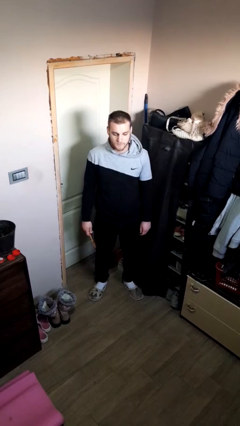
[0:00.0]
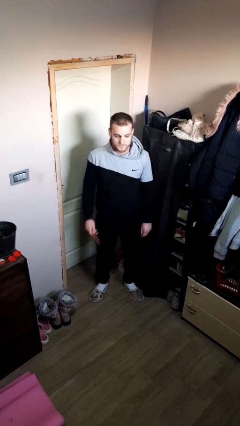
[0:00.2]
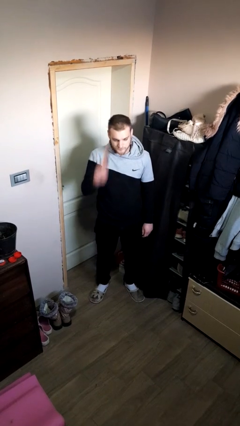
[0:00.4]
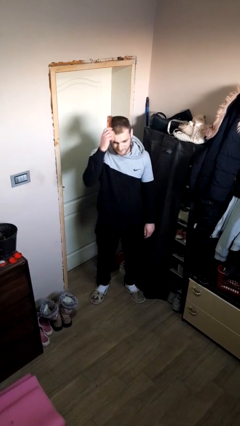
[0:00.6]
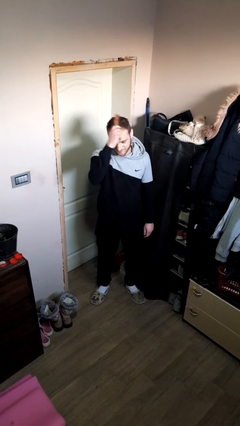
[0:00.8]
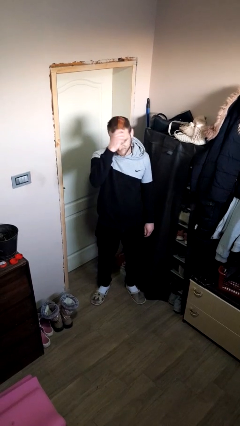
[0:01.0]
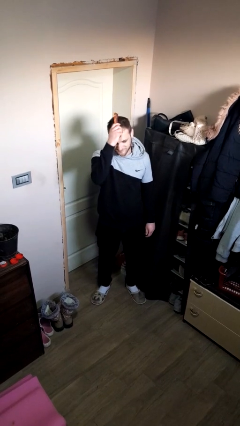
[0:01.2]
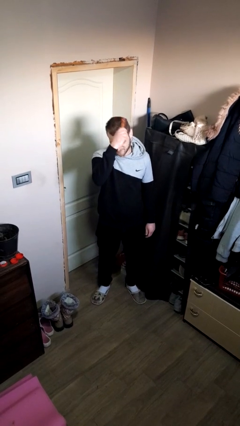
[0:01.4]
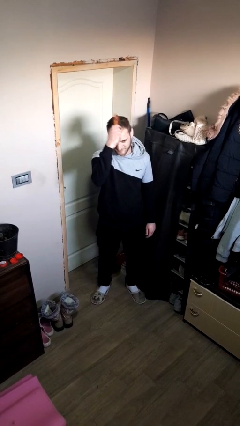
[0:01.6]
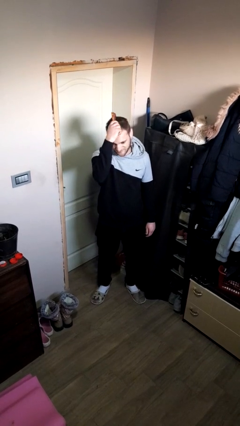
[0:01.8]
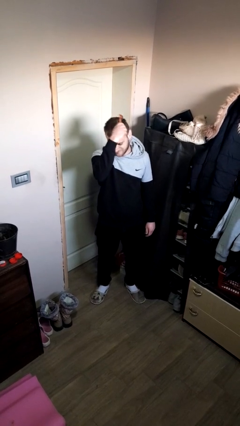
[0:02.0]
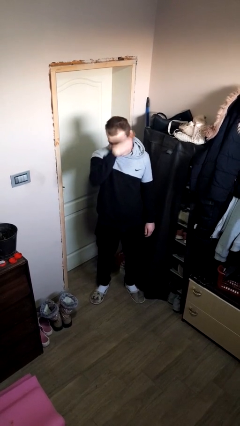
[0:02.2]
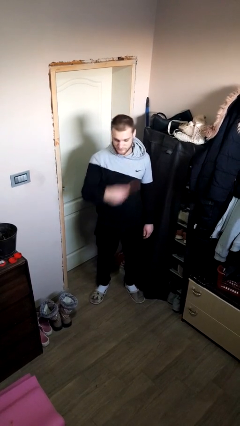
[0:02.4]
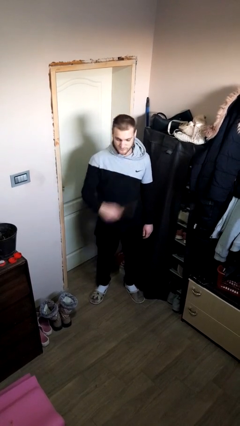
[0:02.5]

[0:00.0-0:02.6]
person brushes hair

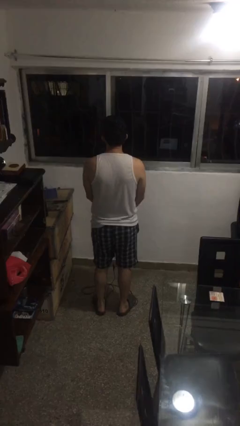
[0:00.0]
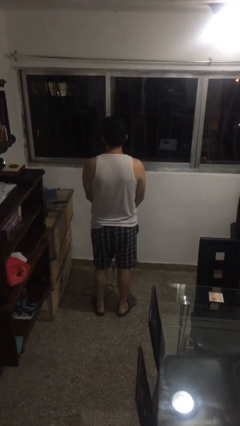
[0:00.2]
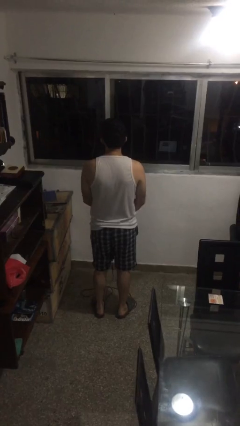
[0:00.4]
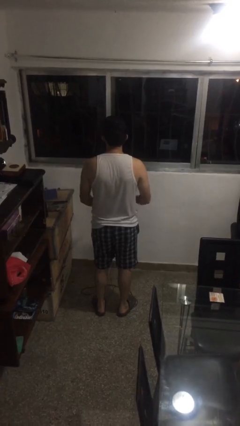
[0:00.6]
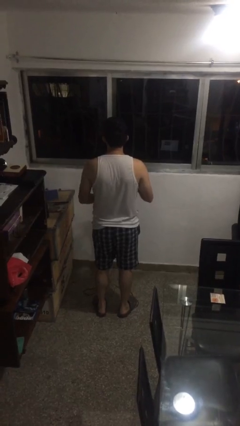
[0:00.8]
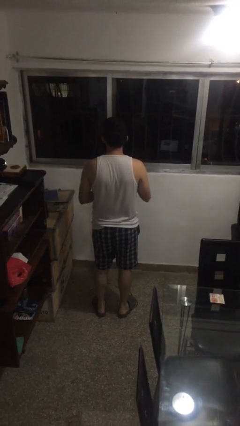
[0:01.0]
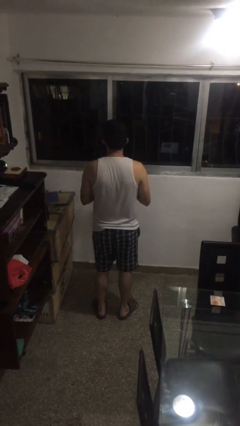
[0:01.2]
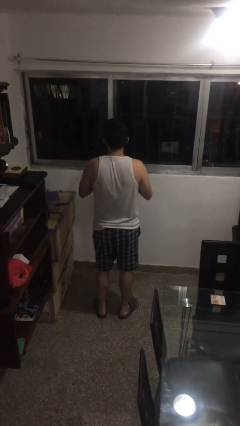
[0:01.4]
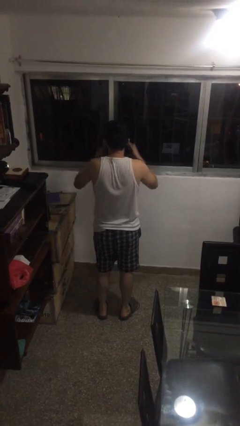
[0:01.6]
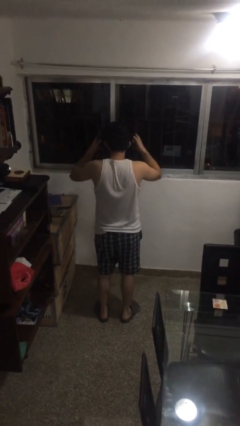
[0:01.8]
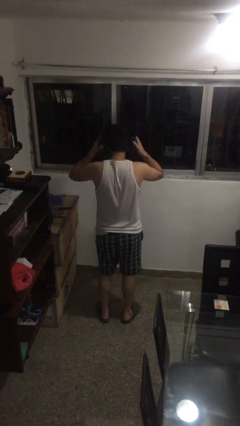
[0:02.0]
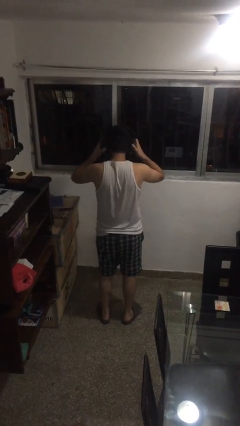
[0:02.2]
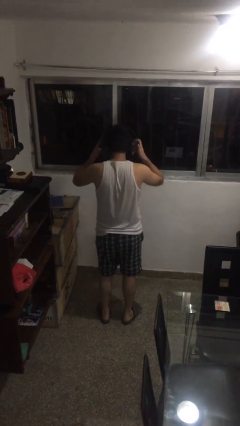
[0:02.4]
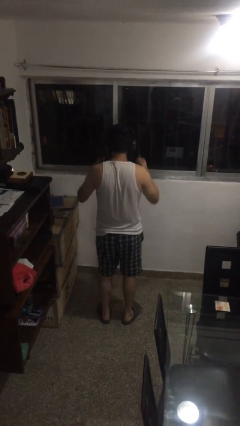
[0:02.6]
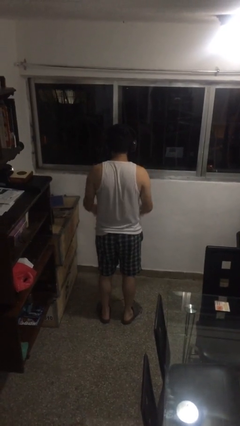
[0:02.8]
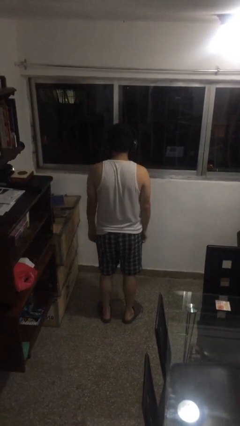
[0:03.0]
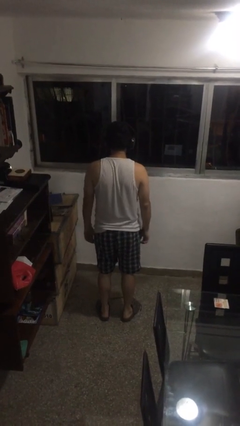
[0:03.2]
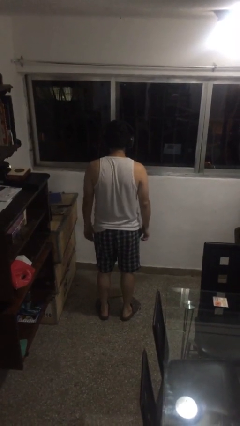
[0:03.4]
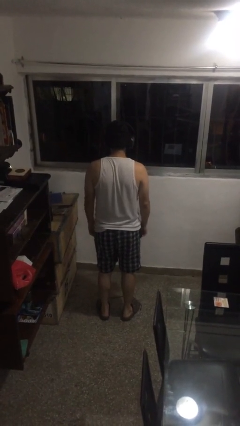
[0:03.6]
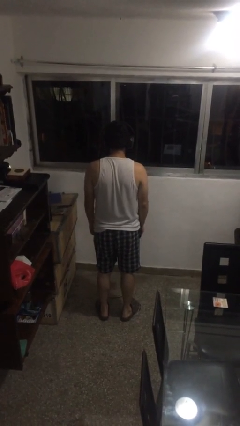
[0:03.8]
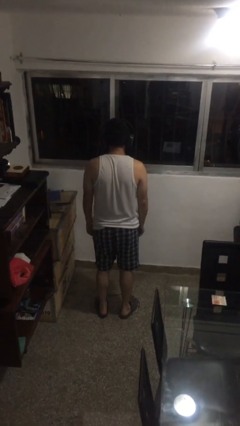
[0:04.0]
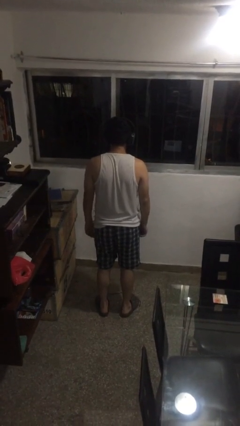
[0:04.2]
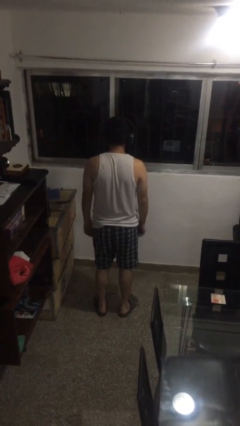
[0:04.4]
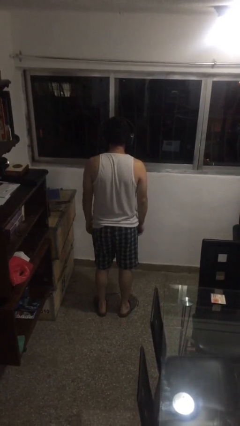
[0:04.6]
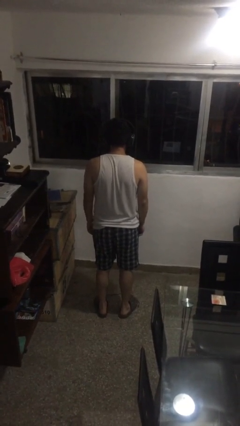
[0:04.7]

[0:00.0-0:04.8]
person puts on headphones

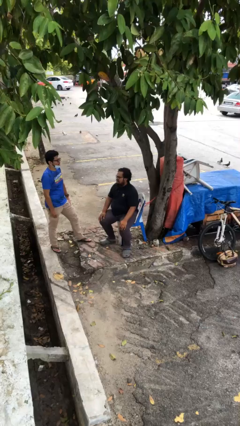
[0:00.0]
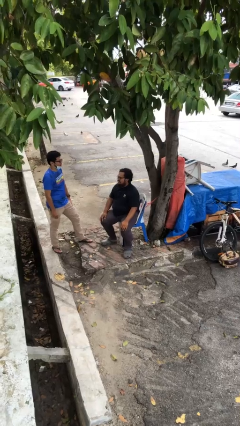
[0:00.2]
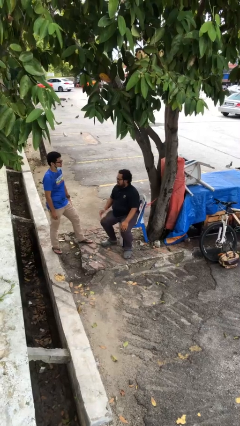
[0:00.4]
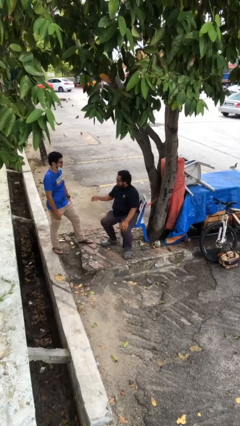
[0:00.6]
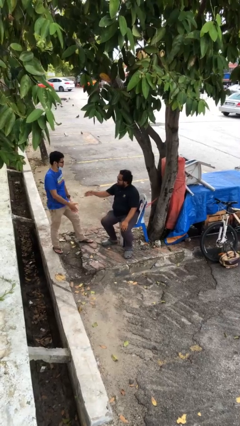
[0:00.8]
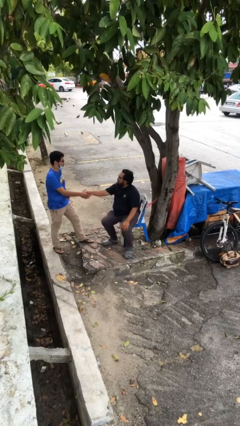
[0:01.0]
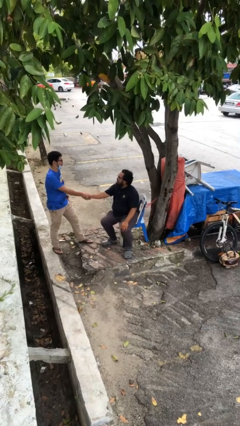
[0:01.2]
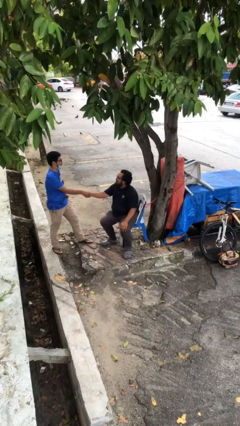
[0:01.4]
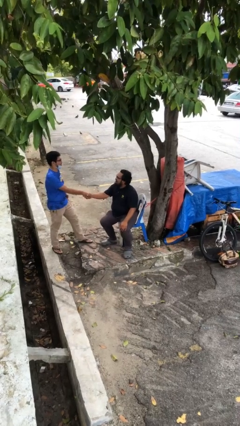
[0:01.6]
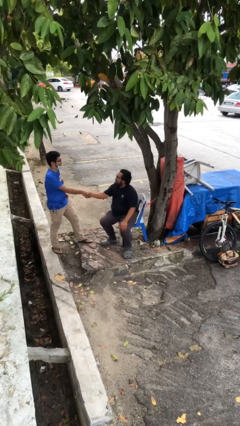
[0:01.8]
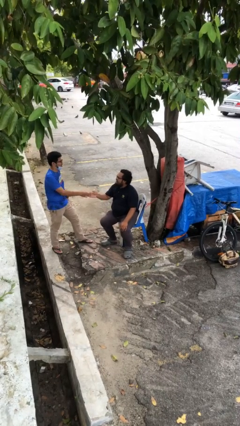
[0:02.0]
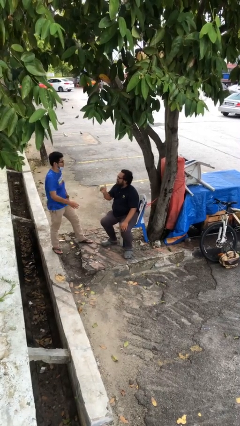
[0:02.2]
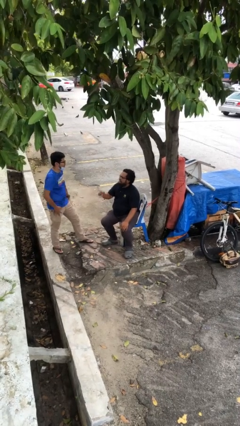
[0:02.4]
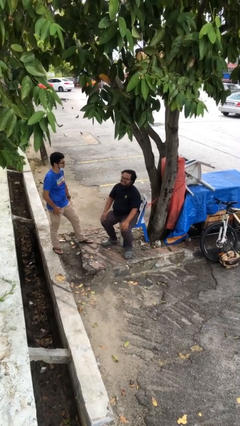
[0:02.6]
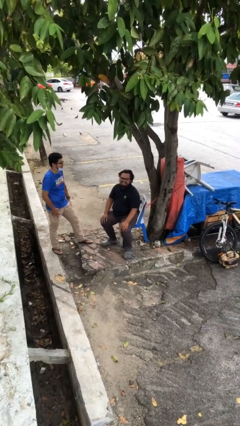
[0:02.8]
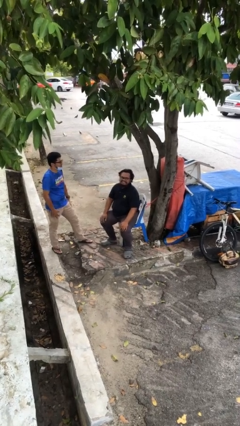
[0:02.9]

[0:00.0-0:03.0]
person shakes hand

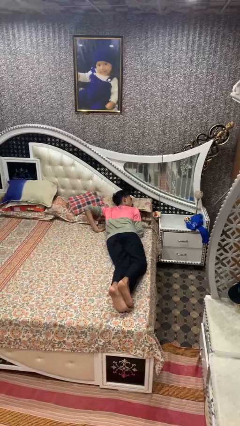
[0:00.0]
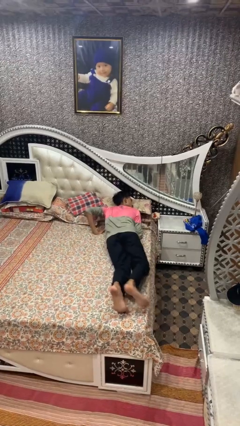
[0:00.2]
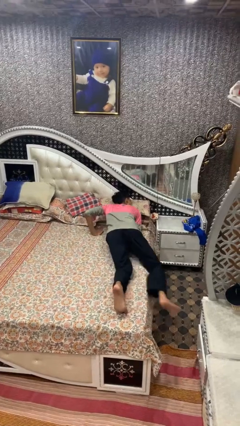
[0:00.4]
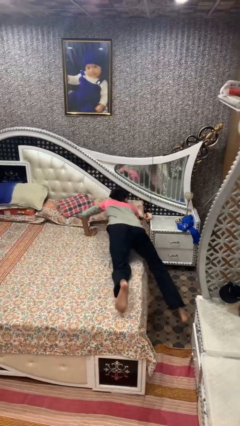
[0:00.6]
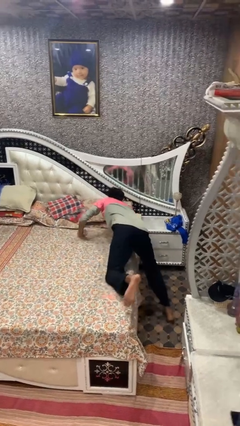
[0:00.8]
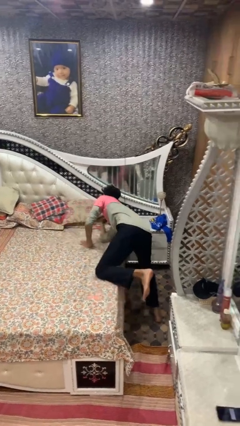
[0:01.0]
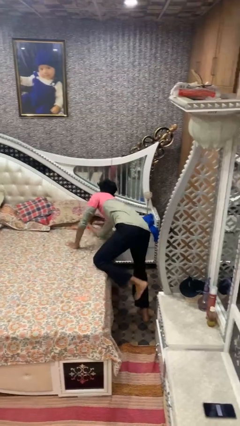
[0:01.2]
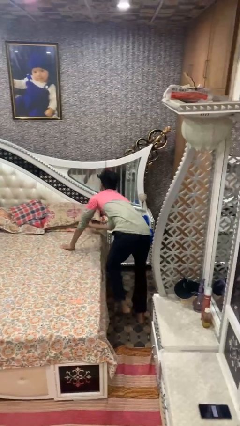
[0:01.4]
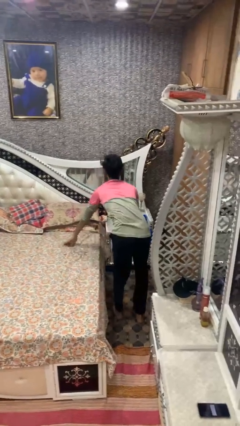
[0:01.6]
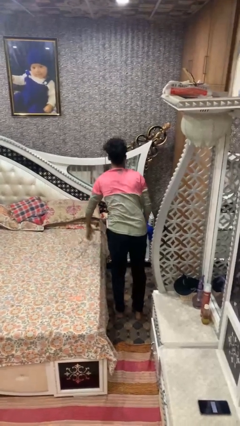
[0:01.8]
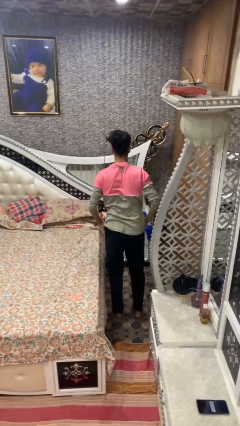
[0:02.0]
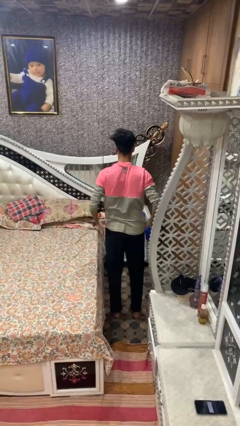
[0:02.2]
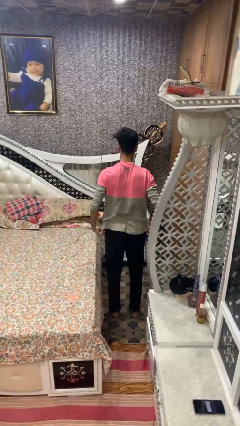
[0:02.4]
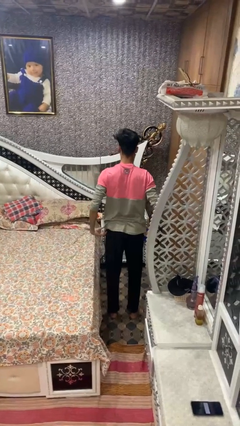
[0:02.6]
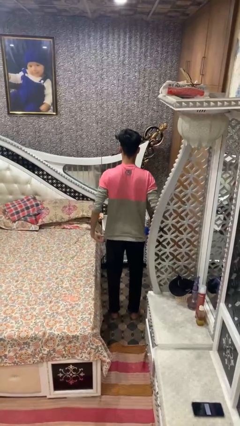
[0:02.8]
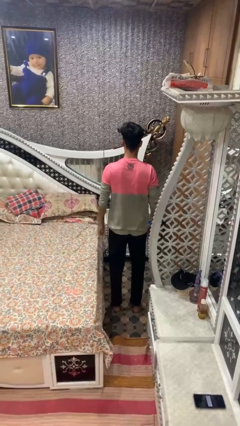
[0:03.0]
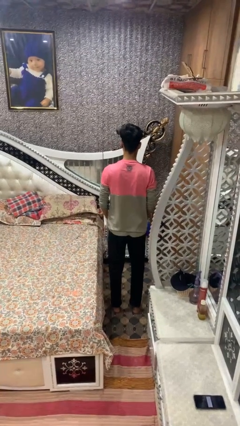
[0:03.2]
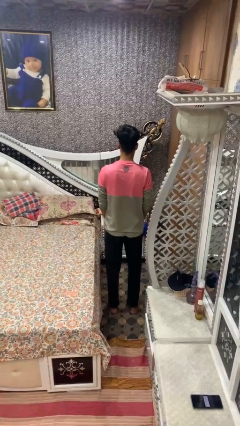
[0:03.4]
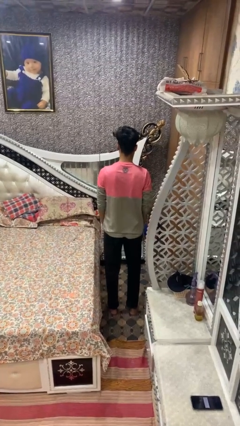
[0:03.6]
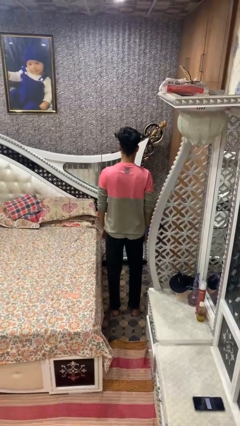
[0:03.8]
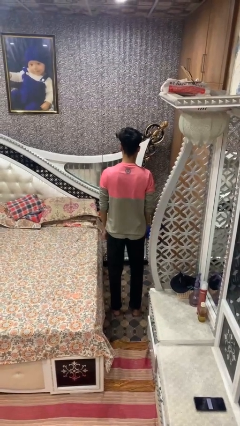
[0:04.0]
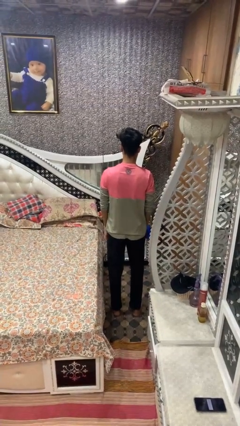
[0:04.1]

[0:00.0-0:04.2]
person stands up

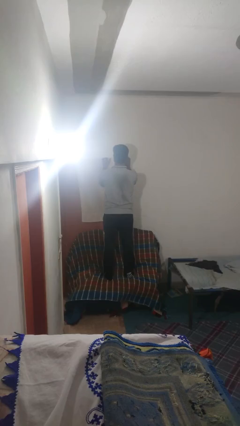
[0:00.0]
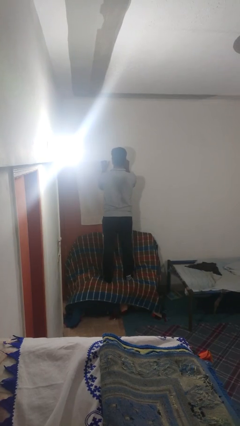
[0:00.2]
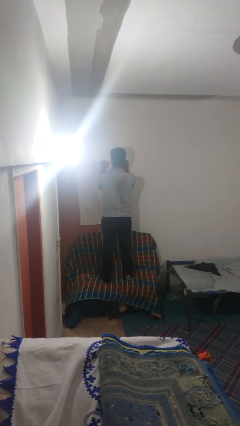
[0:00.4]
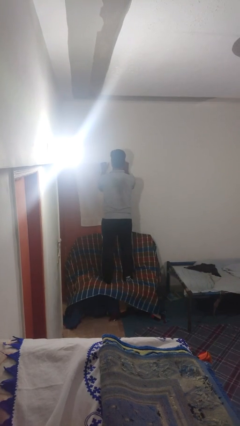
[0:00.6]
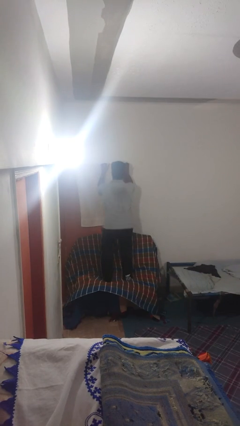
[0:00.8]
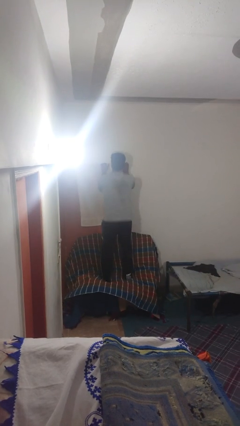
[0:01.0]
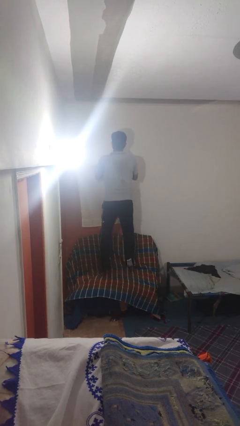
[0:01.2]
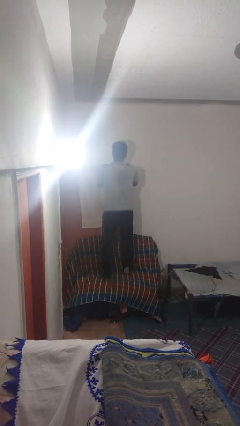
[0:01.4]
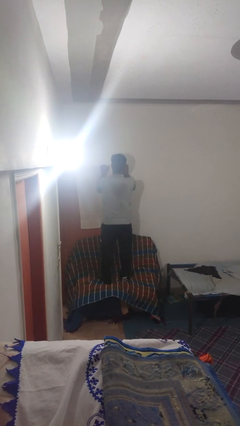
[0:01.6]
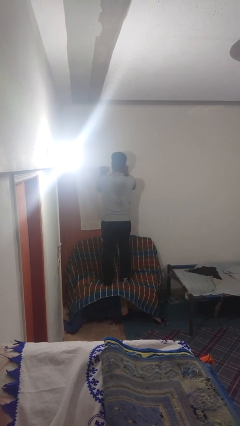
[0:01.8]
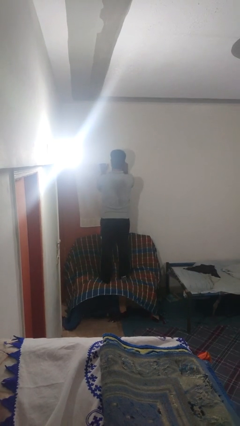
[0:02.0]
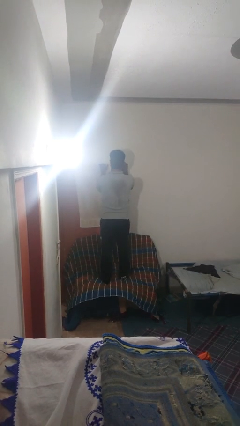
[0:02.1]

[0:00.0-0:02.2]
person jumps on couch

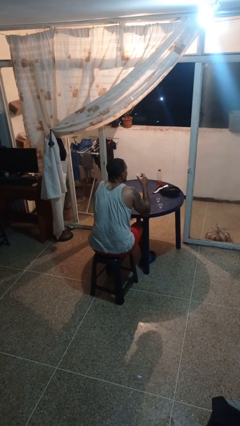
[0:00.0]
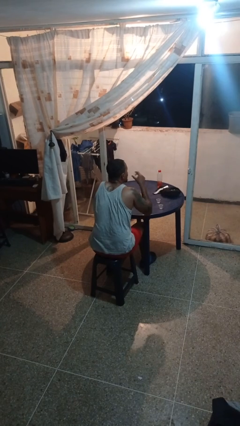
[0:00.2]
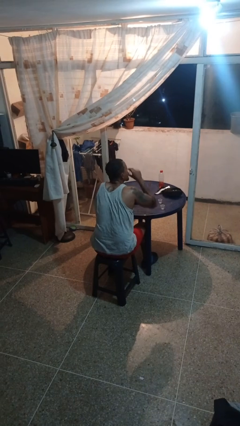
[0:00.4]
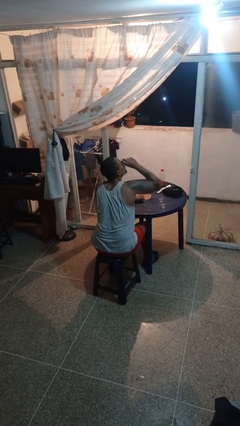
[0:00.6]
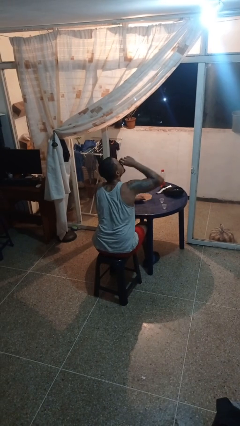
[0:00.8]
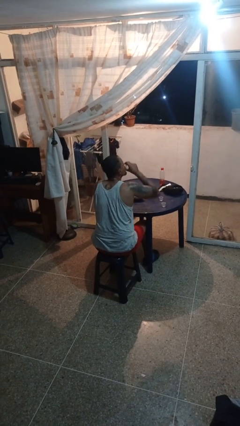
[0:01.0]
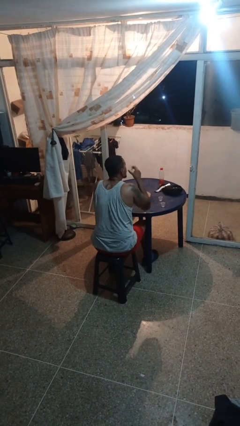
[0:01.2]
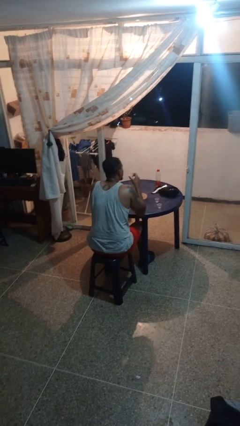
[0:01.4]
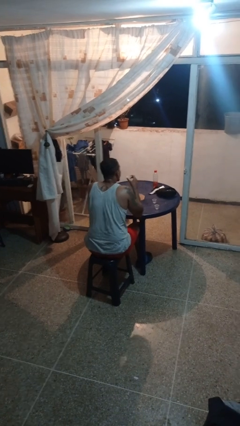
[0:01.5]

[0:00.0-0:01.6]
person drinks from shotglass
